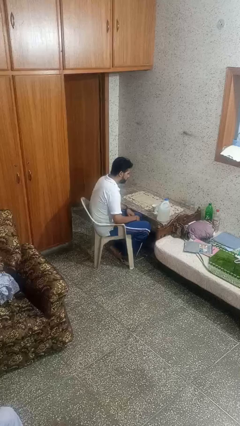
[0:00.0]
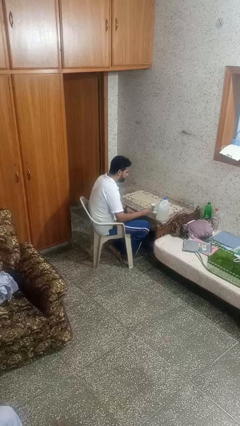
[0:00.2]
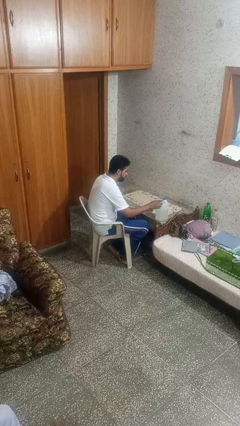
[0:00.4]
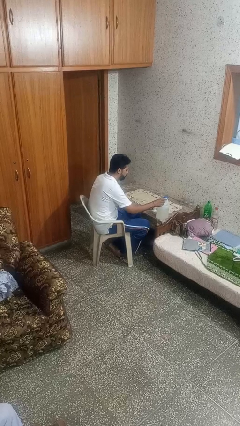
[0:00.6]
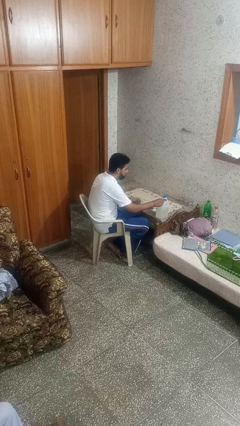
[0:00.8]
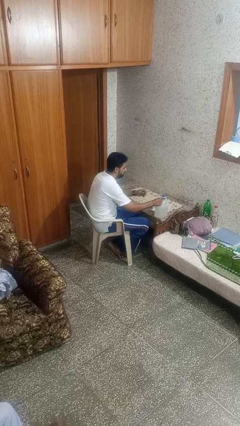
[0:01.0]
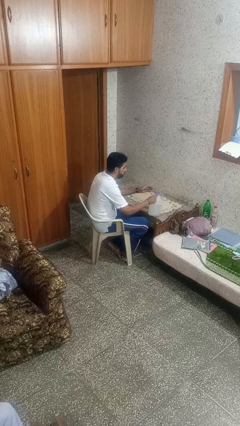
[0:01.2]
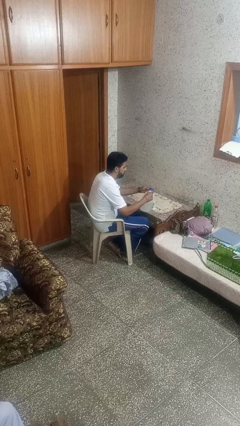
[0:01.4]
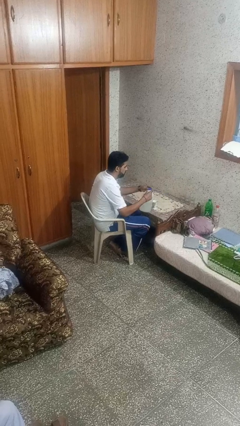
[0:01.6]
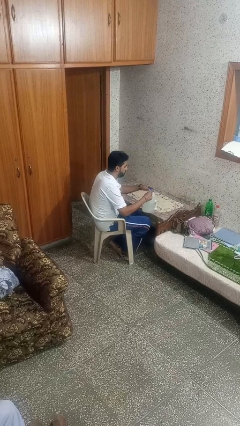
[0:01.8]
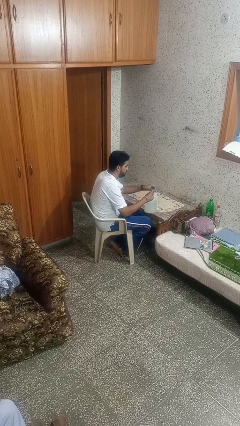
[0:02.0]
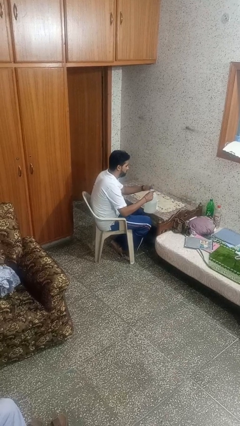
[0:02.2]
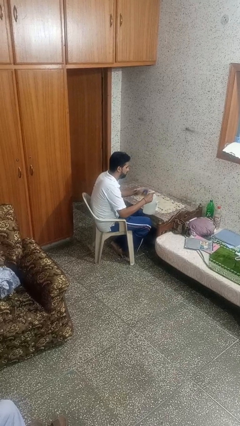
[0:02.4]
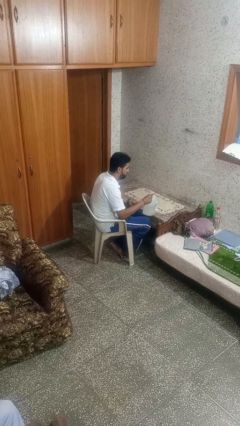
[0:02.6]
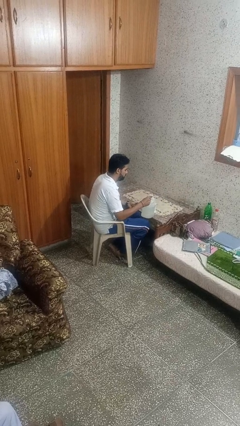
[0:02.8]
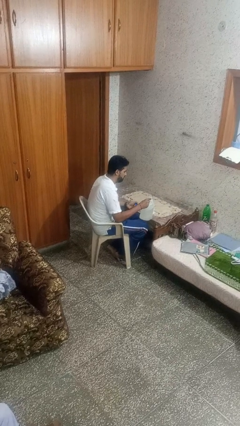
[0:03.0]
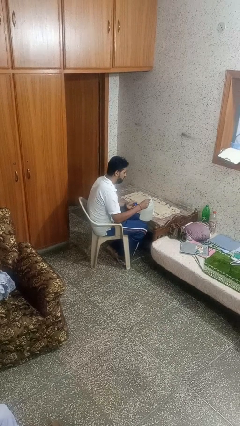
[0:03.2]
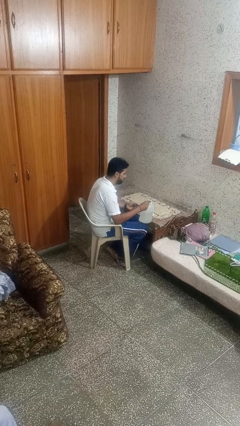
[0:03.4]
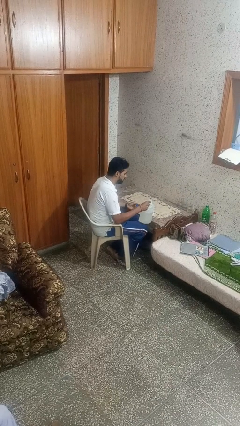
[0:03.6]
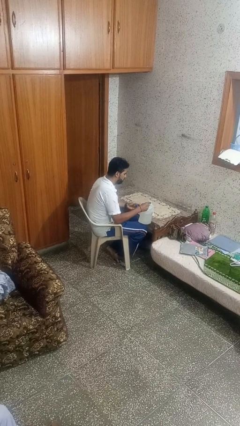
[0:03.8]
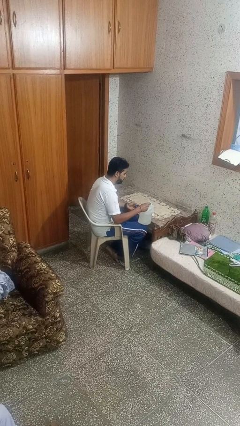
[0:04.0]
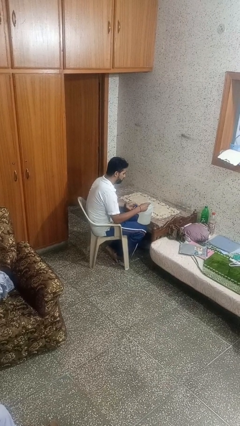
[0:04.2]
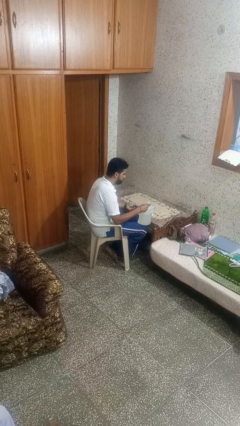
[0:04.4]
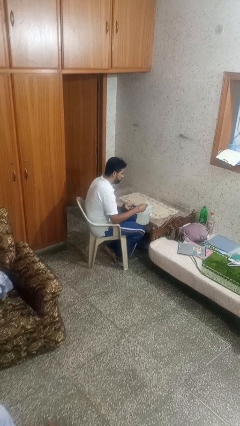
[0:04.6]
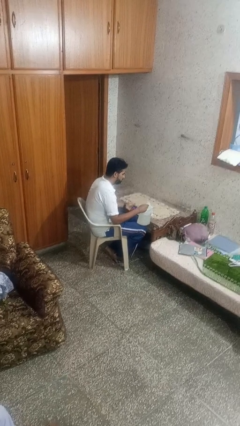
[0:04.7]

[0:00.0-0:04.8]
person unscrews lid from bottle

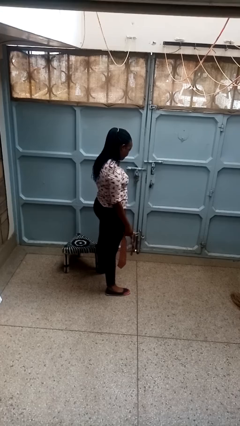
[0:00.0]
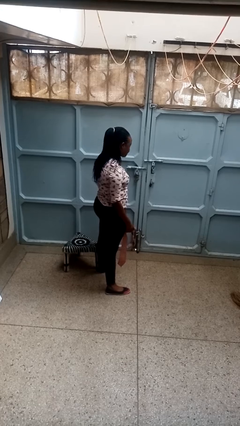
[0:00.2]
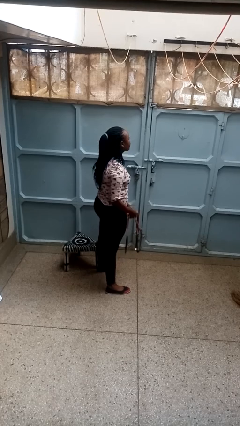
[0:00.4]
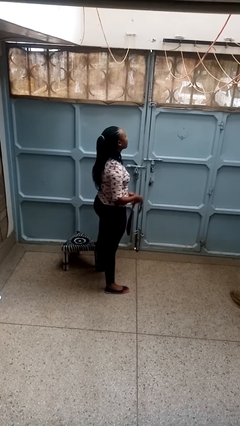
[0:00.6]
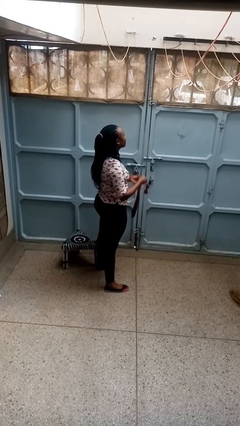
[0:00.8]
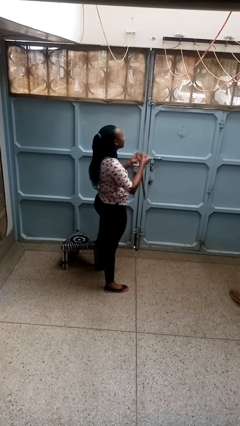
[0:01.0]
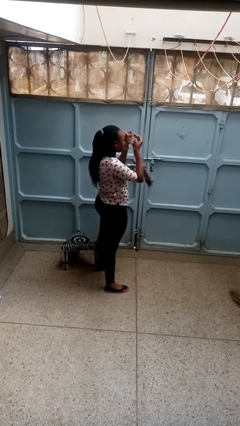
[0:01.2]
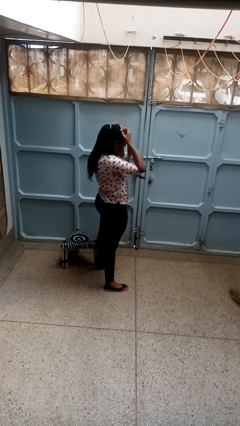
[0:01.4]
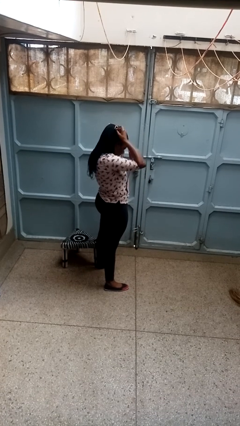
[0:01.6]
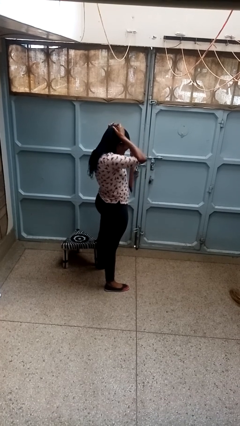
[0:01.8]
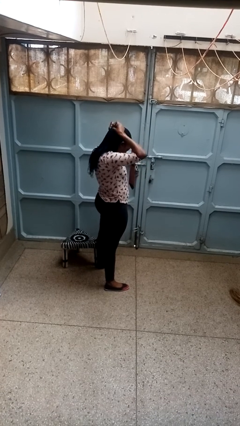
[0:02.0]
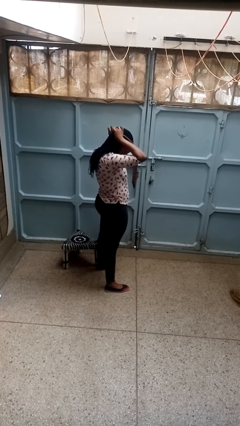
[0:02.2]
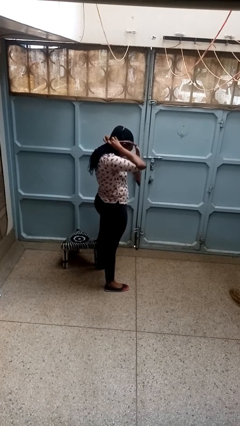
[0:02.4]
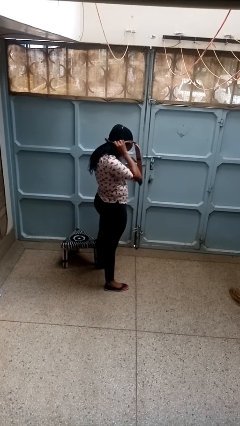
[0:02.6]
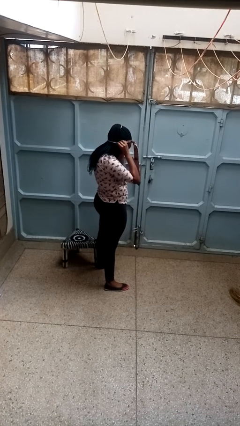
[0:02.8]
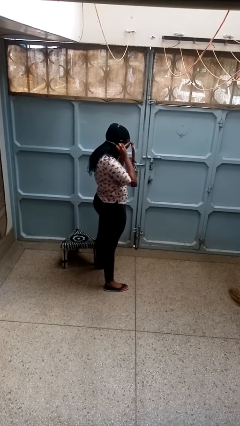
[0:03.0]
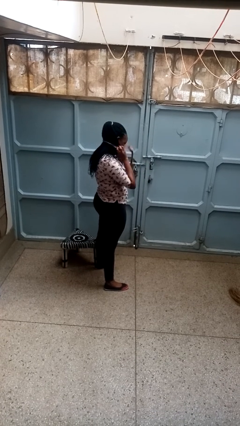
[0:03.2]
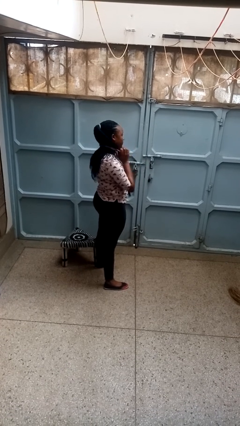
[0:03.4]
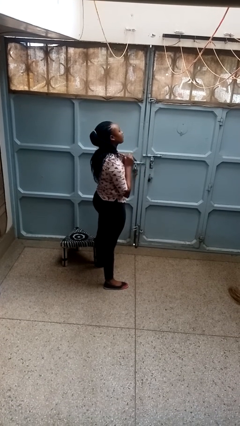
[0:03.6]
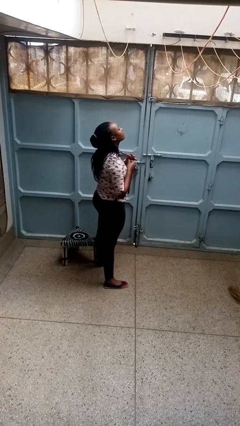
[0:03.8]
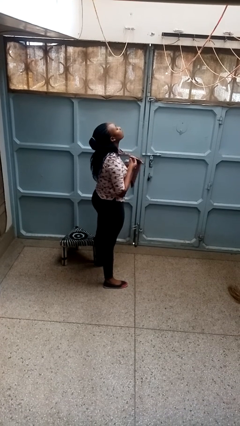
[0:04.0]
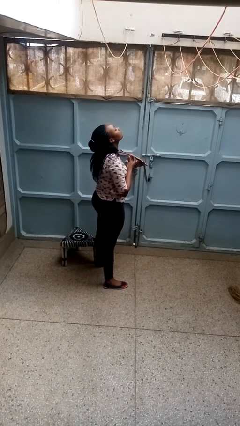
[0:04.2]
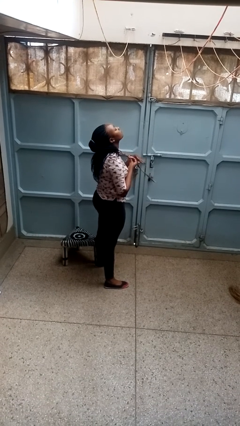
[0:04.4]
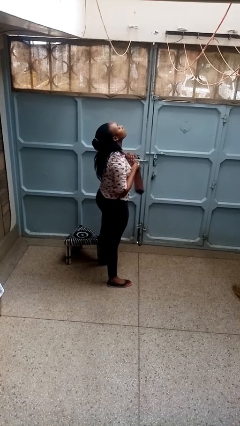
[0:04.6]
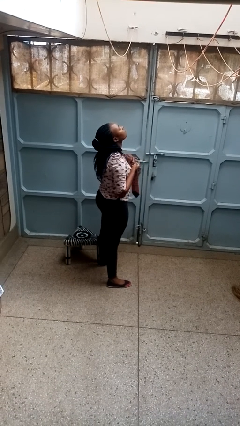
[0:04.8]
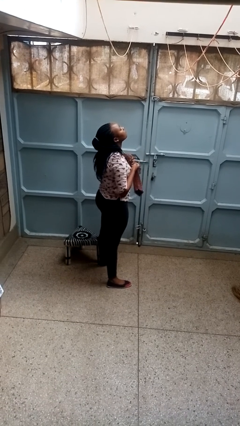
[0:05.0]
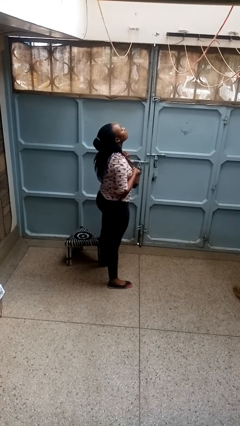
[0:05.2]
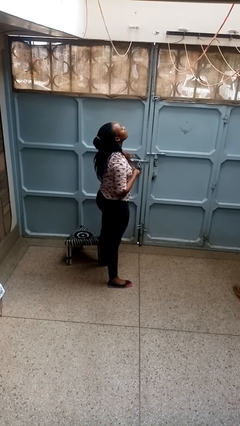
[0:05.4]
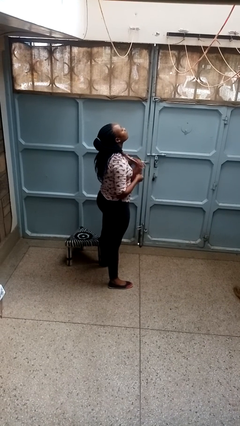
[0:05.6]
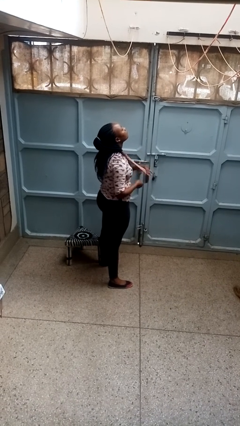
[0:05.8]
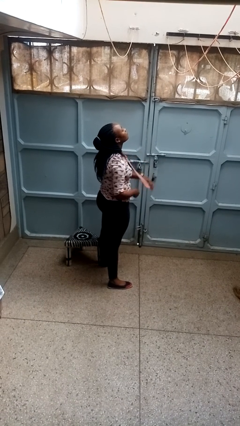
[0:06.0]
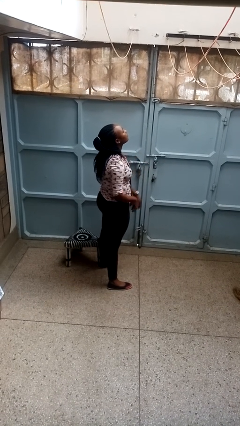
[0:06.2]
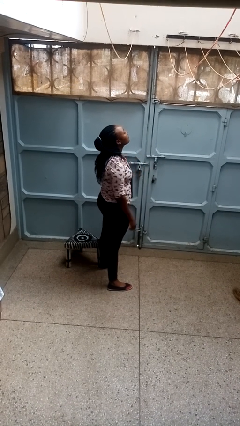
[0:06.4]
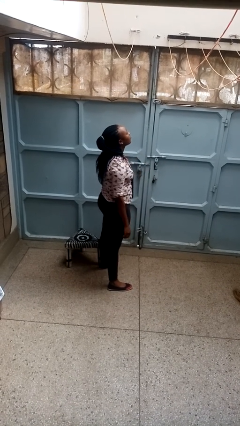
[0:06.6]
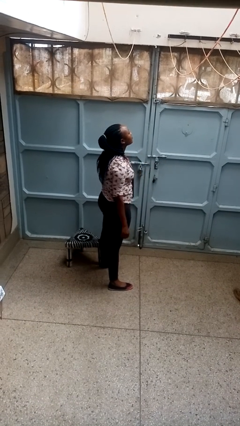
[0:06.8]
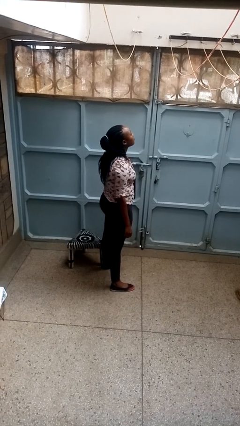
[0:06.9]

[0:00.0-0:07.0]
person puts on necktie

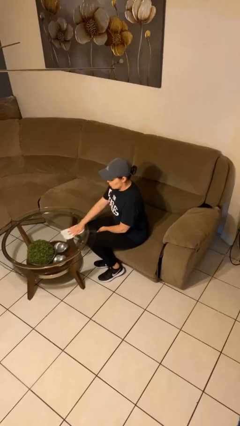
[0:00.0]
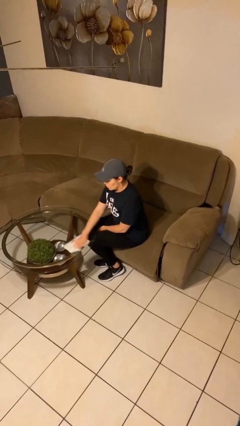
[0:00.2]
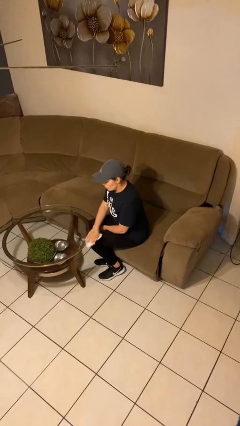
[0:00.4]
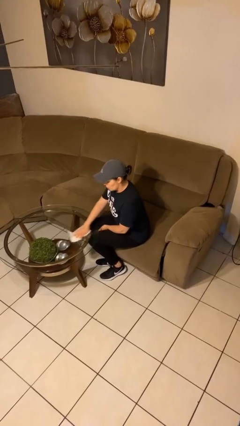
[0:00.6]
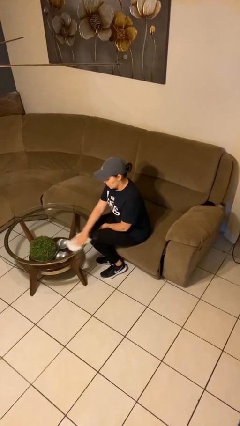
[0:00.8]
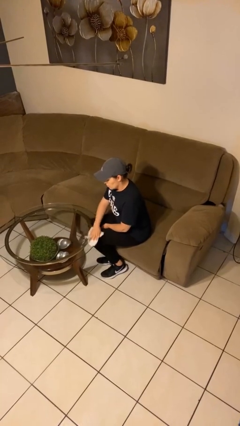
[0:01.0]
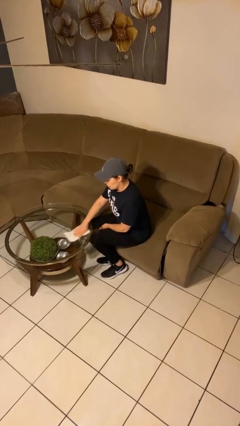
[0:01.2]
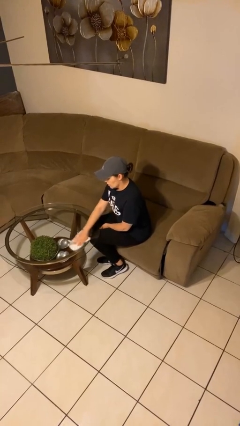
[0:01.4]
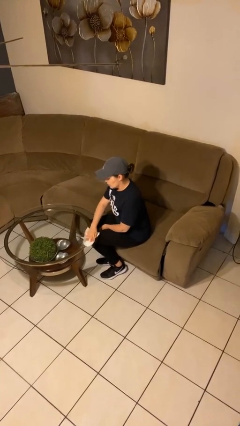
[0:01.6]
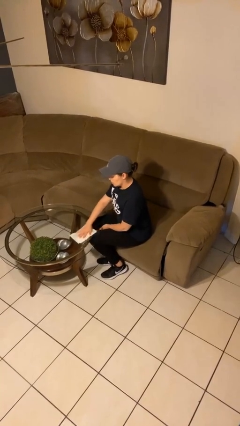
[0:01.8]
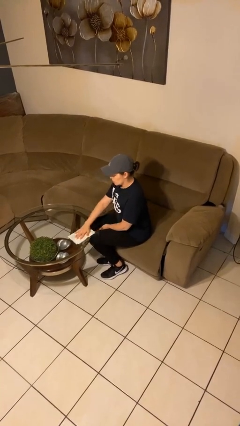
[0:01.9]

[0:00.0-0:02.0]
person cleans table with rag

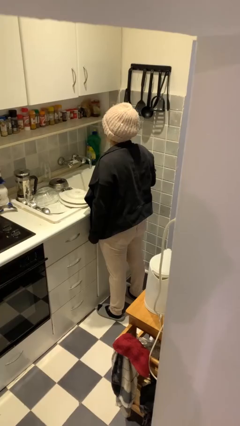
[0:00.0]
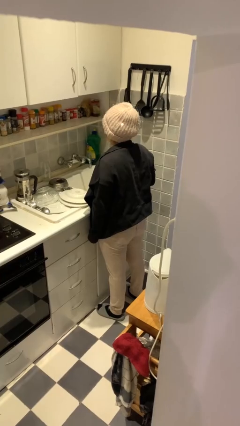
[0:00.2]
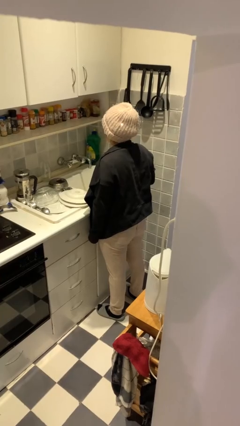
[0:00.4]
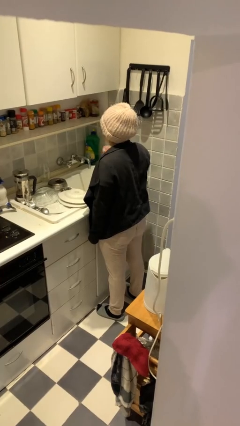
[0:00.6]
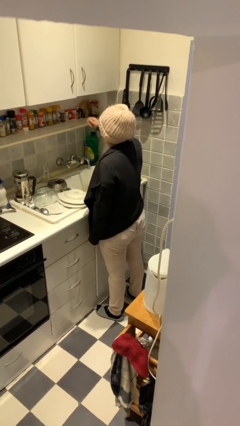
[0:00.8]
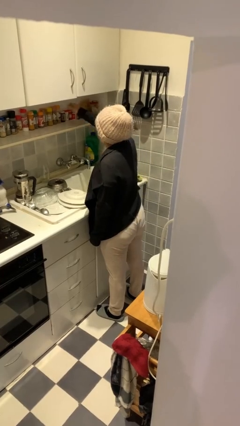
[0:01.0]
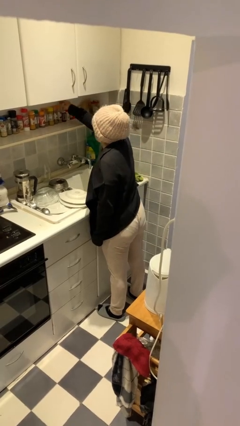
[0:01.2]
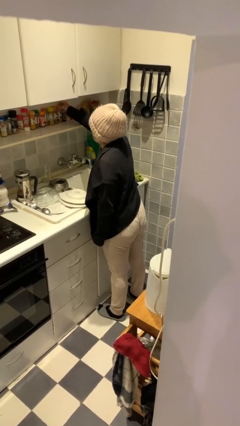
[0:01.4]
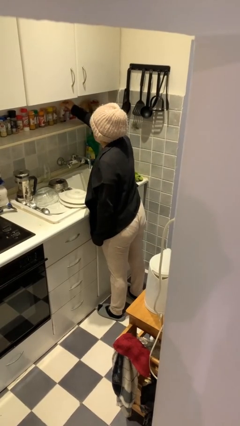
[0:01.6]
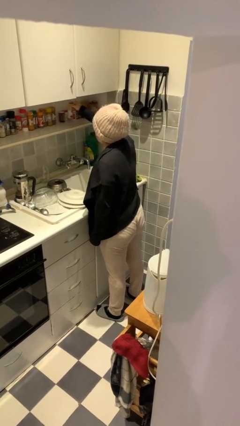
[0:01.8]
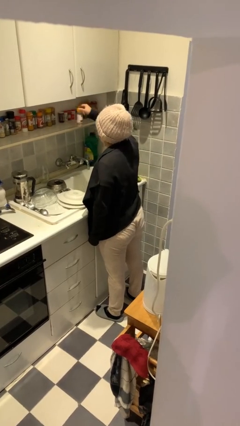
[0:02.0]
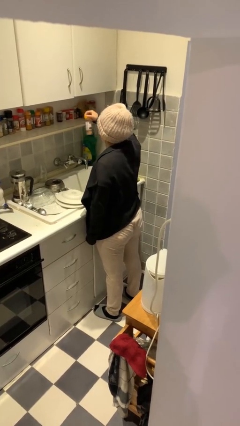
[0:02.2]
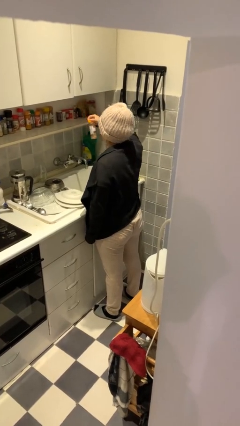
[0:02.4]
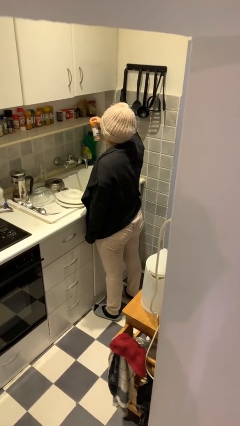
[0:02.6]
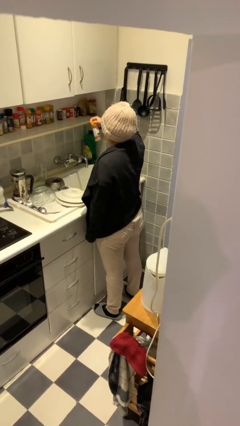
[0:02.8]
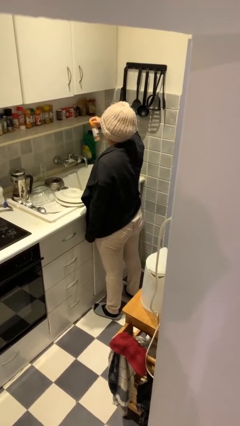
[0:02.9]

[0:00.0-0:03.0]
person picks up object from countertop

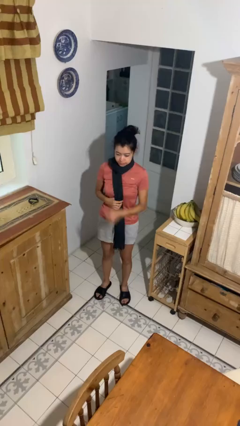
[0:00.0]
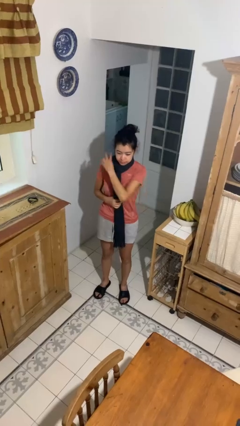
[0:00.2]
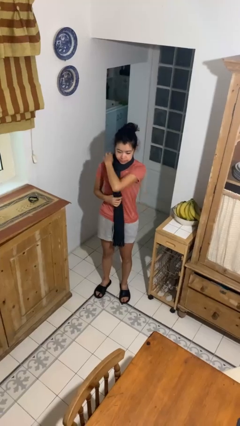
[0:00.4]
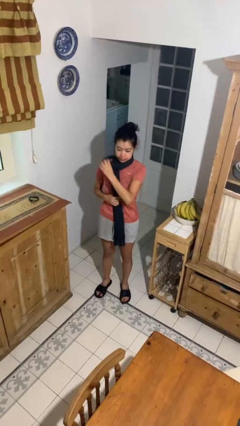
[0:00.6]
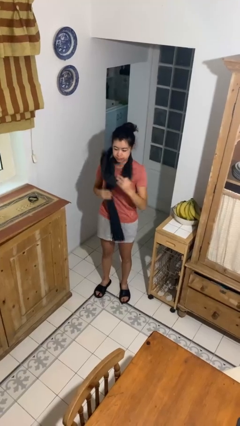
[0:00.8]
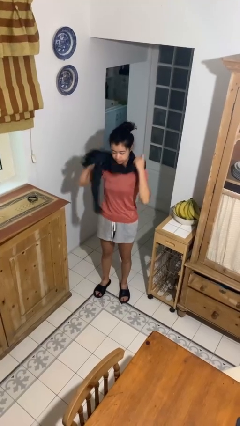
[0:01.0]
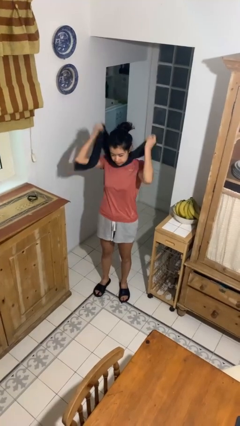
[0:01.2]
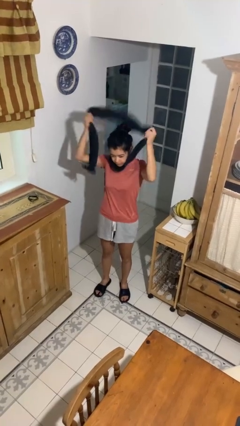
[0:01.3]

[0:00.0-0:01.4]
person takes off scarf
